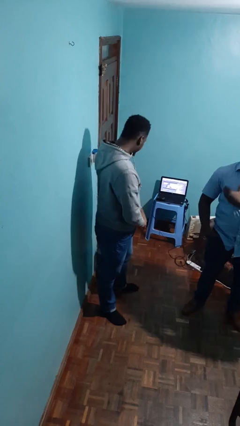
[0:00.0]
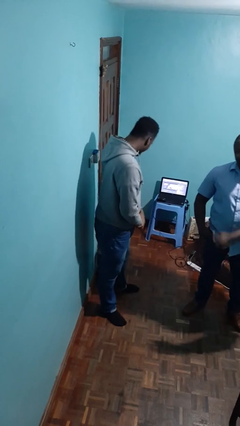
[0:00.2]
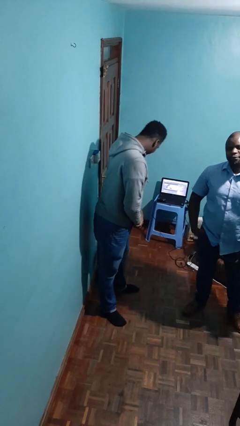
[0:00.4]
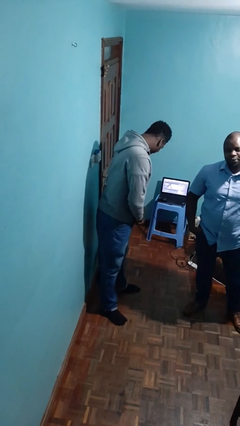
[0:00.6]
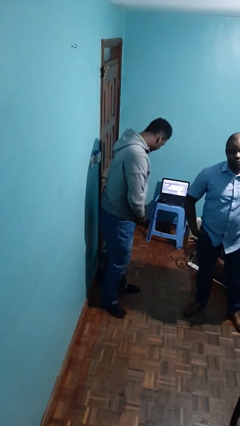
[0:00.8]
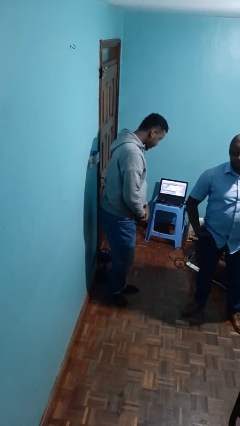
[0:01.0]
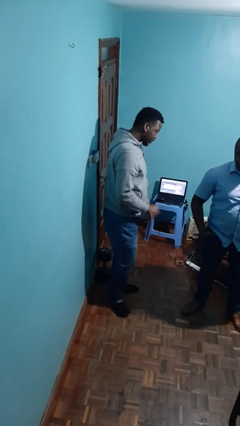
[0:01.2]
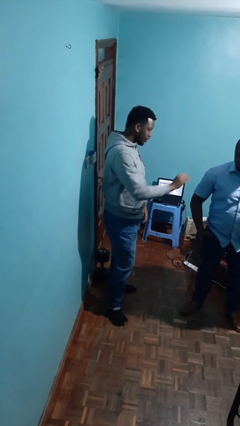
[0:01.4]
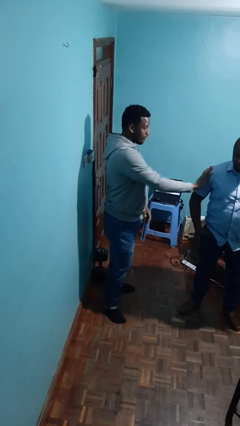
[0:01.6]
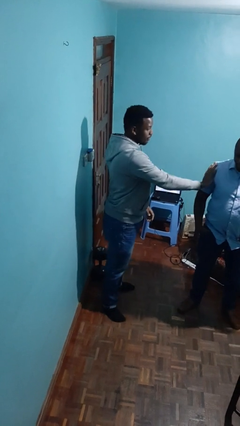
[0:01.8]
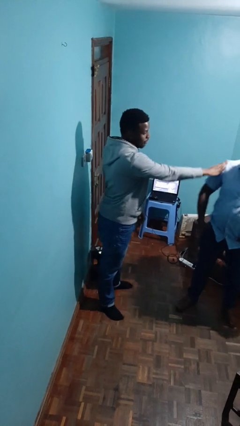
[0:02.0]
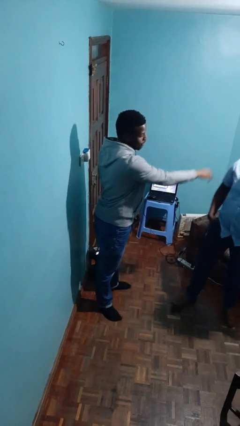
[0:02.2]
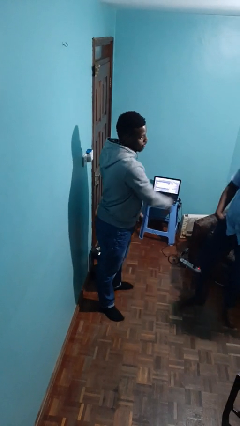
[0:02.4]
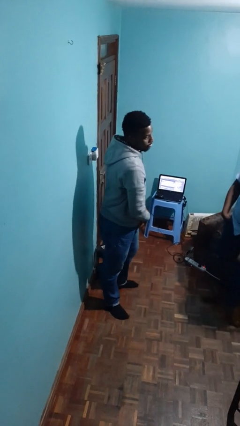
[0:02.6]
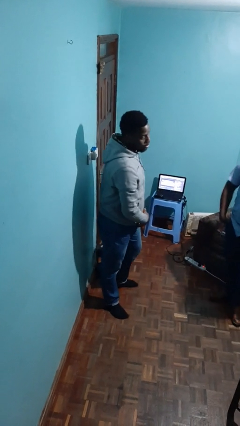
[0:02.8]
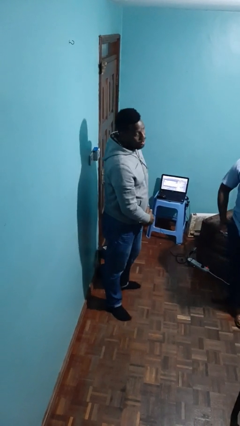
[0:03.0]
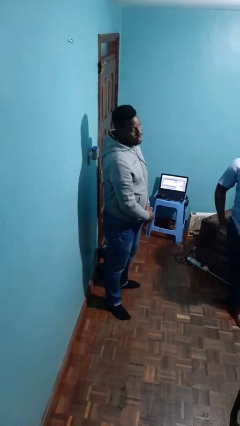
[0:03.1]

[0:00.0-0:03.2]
person shoves person

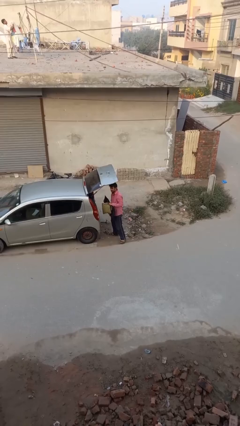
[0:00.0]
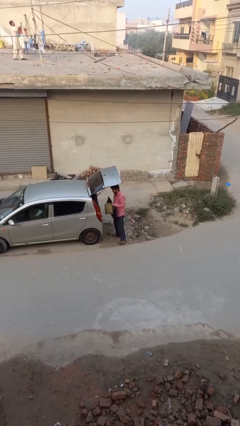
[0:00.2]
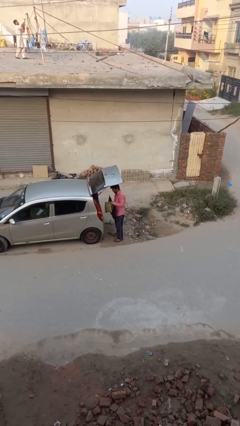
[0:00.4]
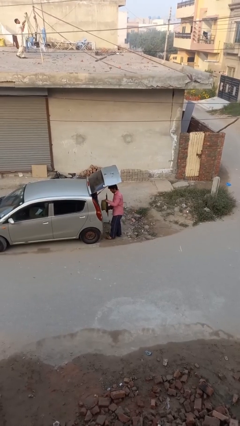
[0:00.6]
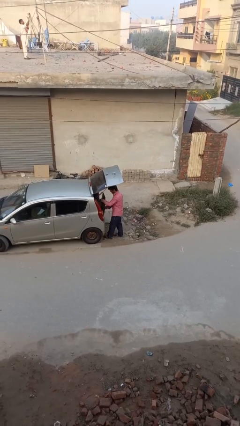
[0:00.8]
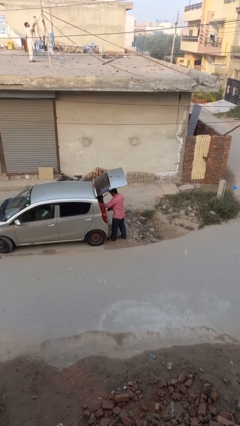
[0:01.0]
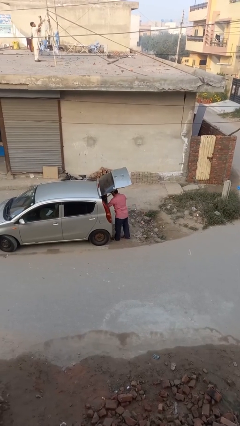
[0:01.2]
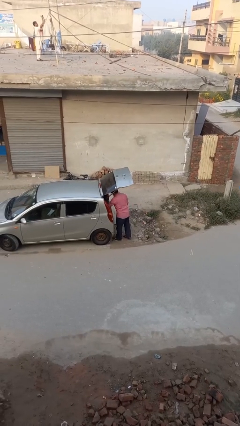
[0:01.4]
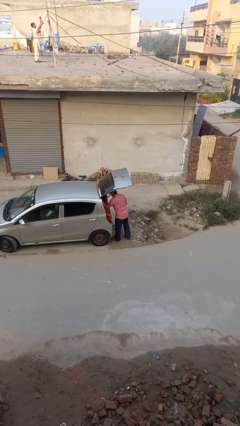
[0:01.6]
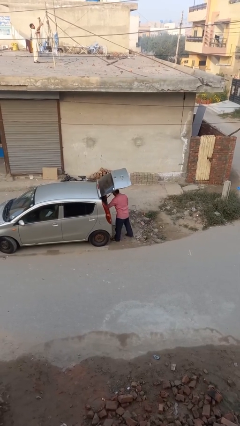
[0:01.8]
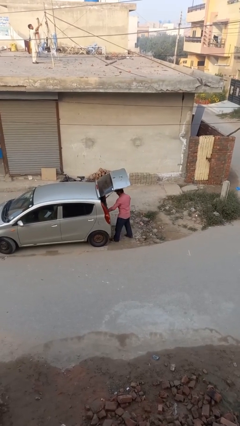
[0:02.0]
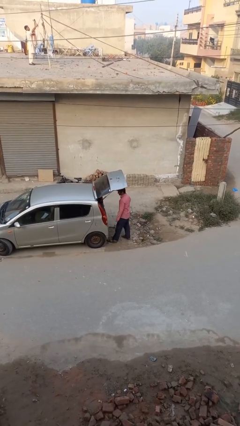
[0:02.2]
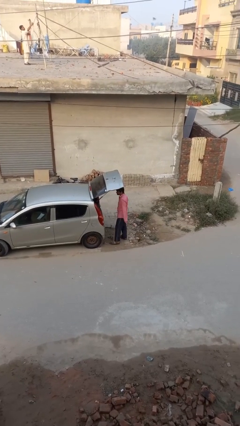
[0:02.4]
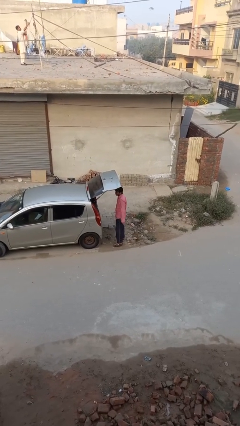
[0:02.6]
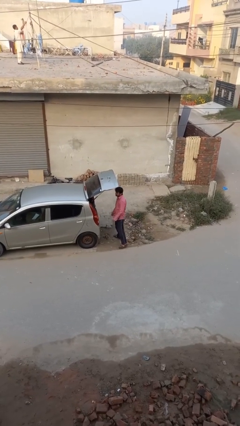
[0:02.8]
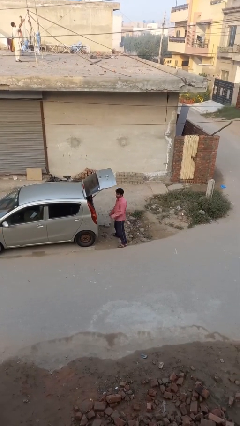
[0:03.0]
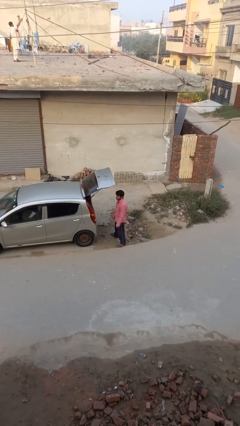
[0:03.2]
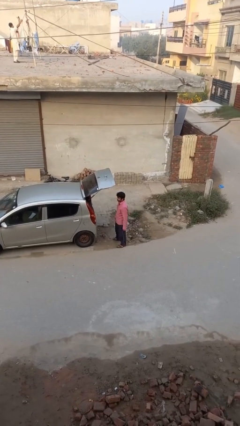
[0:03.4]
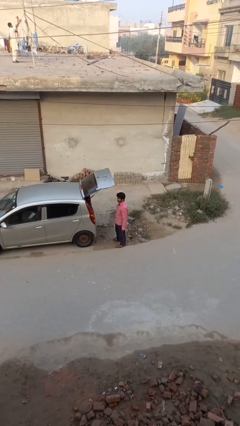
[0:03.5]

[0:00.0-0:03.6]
person loads car

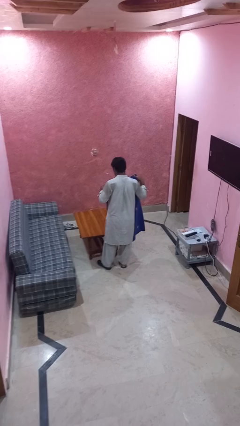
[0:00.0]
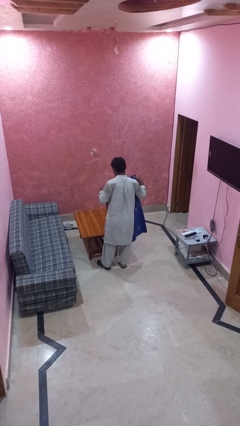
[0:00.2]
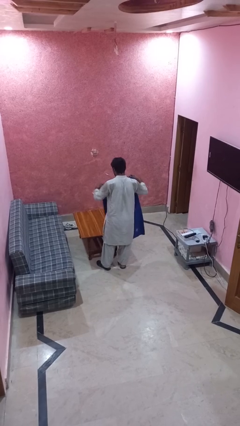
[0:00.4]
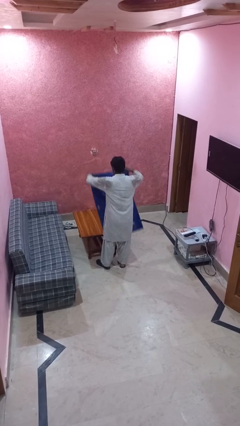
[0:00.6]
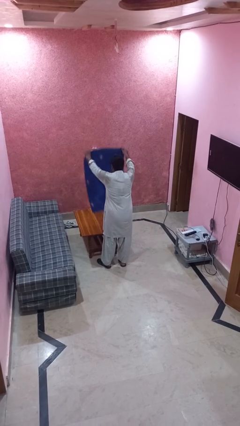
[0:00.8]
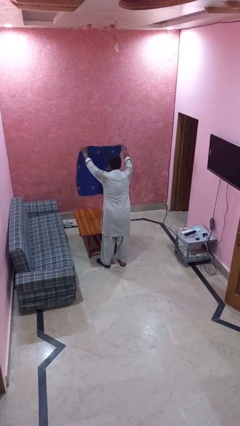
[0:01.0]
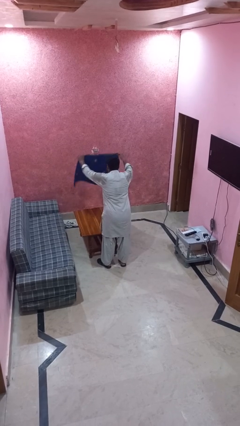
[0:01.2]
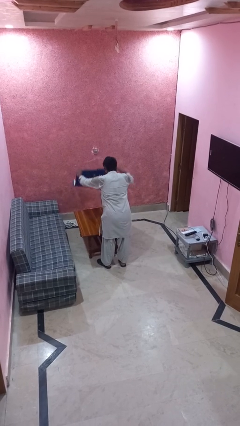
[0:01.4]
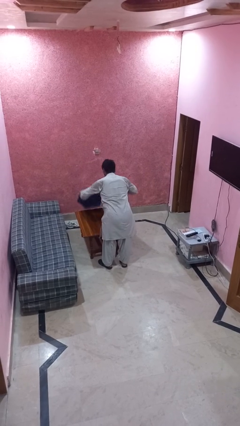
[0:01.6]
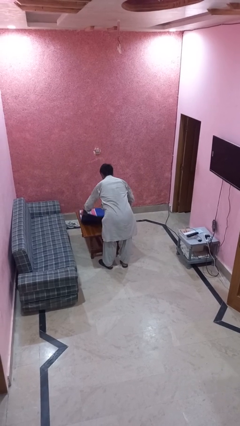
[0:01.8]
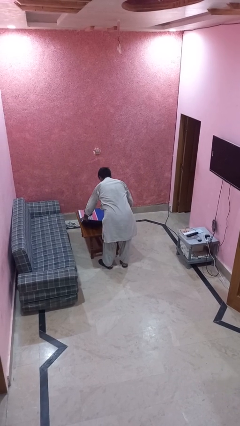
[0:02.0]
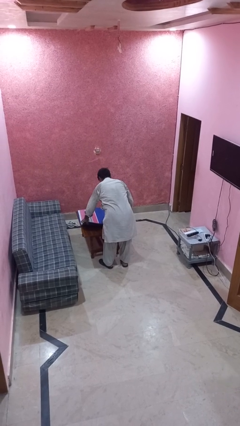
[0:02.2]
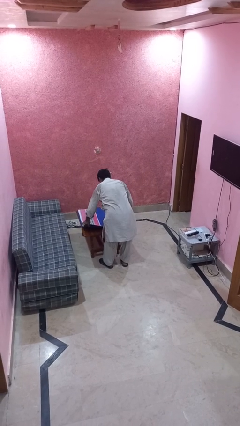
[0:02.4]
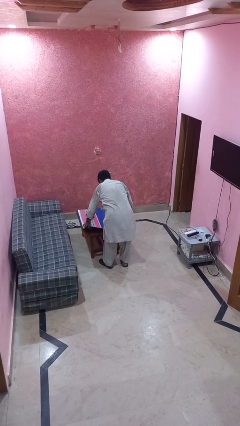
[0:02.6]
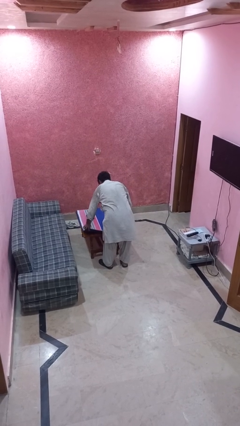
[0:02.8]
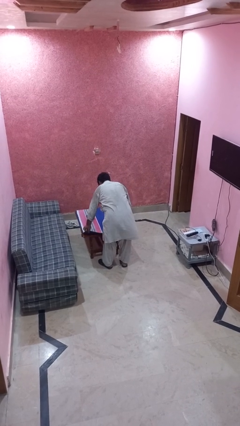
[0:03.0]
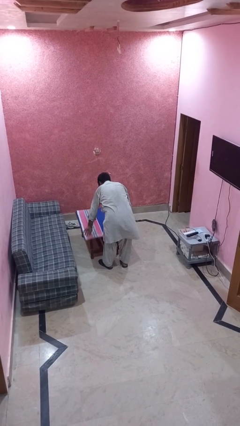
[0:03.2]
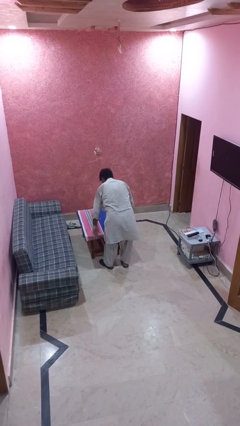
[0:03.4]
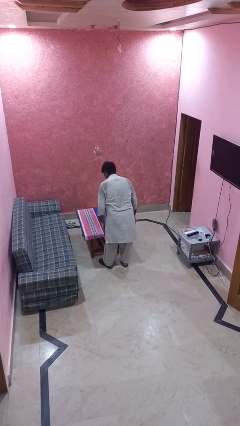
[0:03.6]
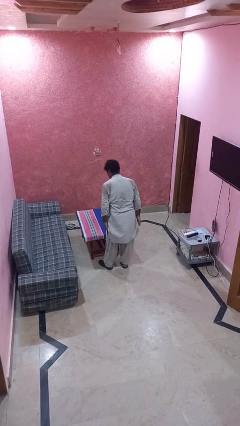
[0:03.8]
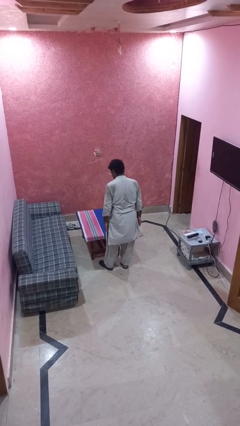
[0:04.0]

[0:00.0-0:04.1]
person spreads tablecloth

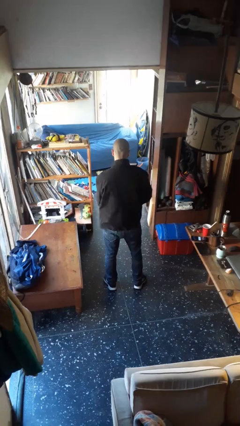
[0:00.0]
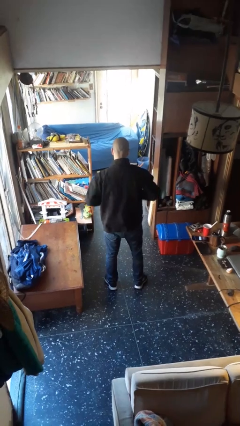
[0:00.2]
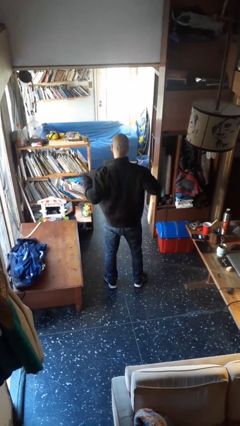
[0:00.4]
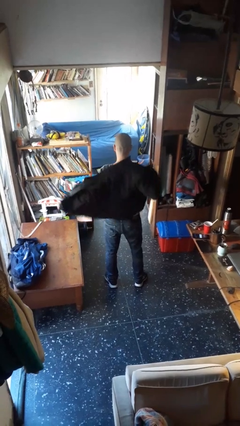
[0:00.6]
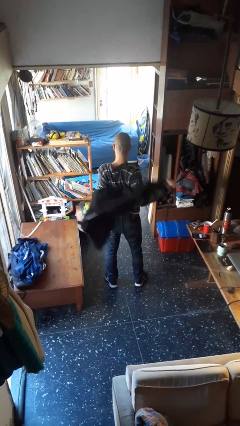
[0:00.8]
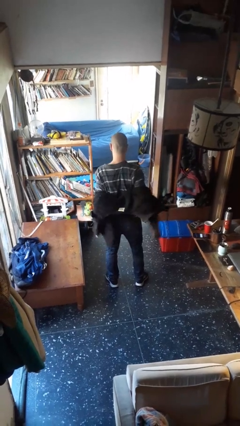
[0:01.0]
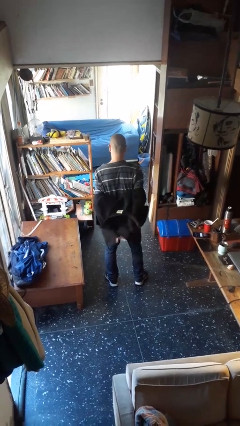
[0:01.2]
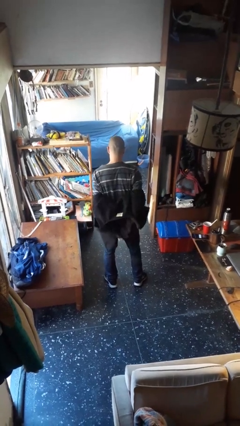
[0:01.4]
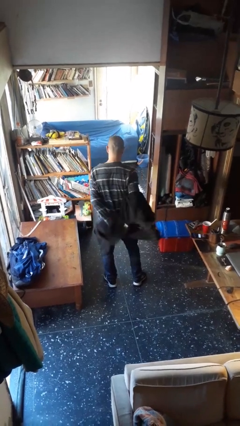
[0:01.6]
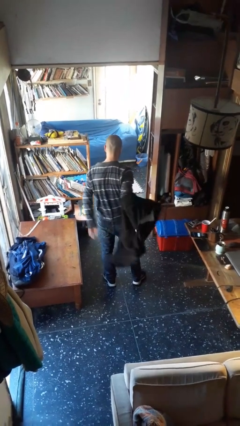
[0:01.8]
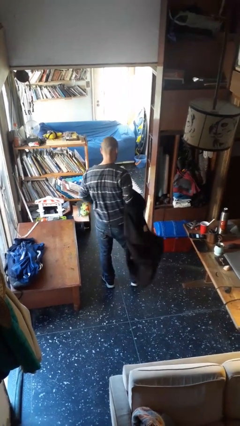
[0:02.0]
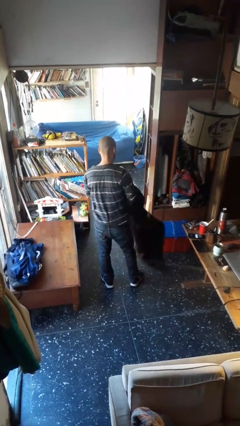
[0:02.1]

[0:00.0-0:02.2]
person takes off jacket

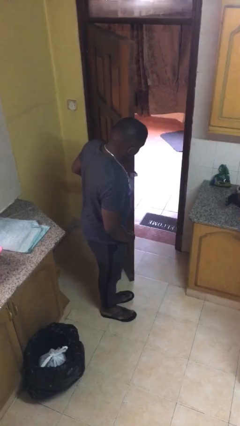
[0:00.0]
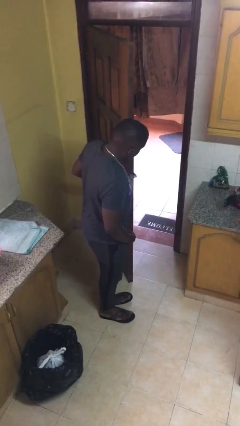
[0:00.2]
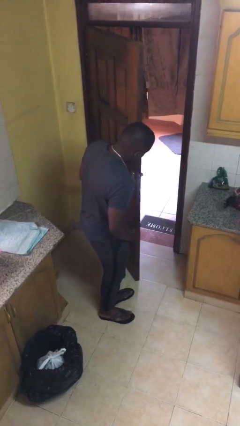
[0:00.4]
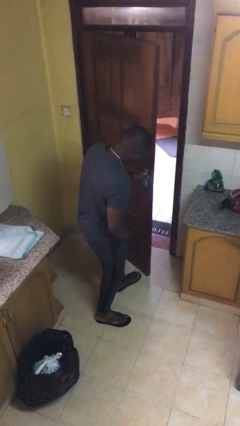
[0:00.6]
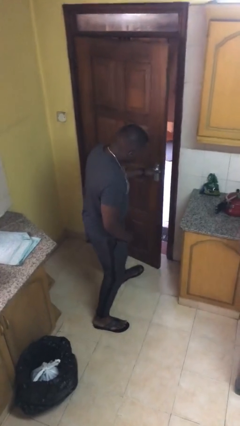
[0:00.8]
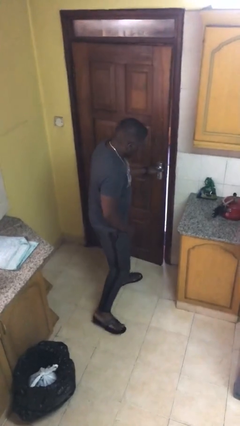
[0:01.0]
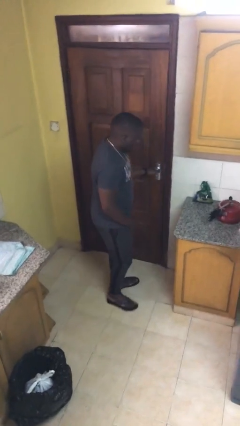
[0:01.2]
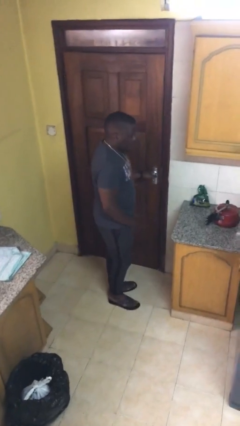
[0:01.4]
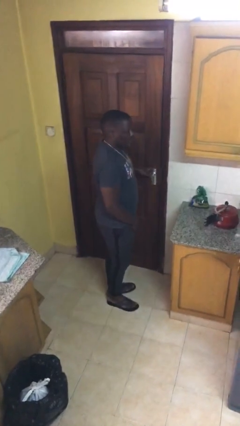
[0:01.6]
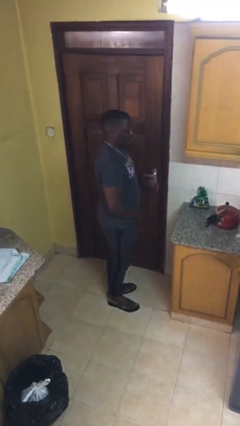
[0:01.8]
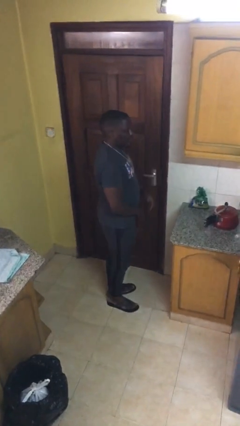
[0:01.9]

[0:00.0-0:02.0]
person closes facility door

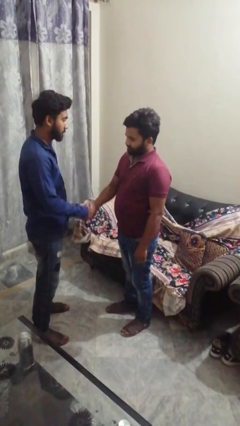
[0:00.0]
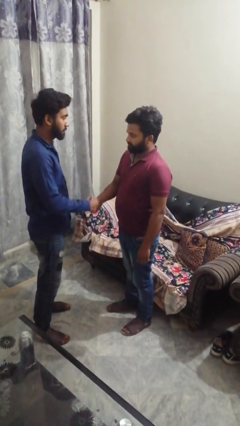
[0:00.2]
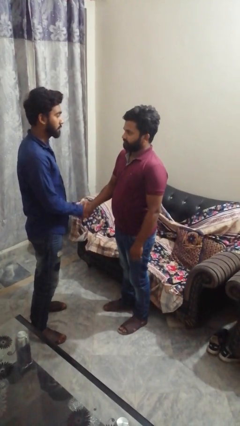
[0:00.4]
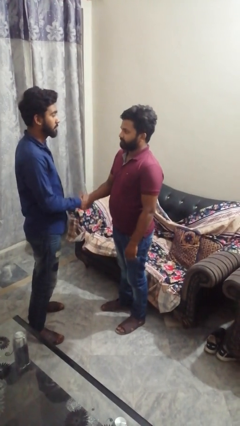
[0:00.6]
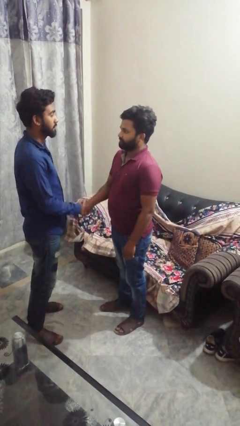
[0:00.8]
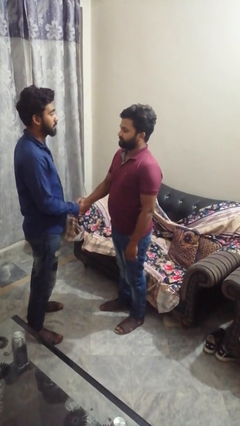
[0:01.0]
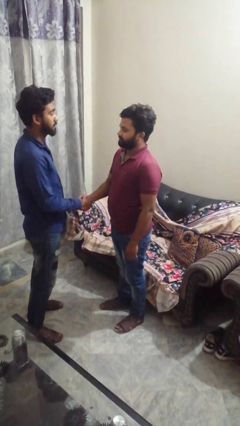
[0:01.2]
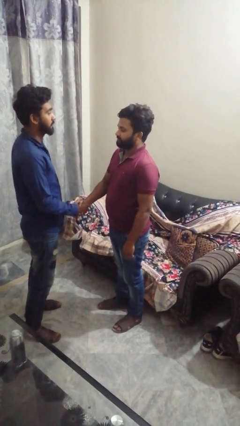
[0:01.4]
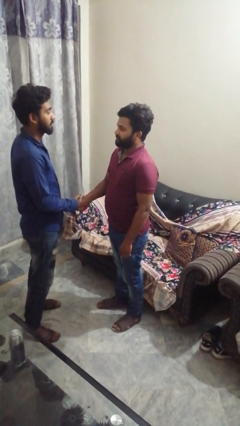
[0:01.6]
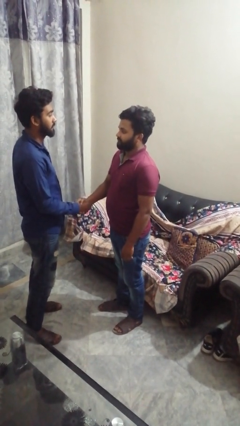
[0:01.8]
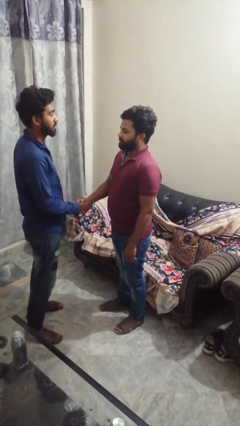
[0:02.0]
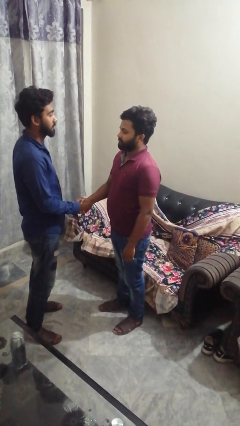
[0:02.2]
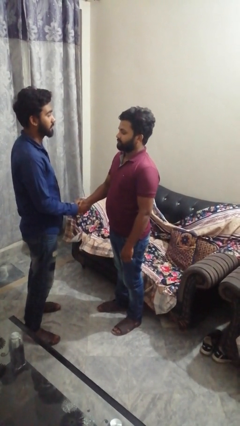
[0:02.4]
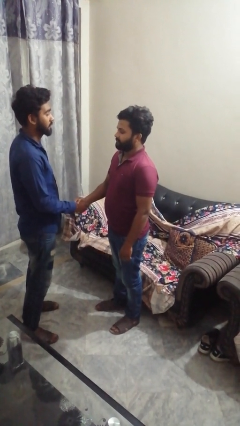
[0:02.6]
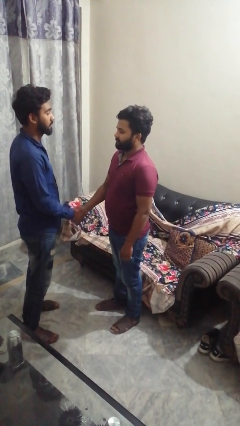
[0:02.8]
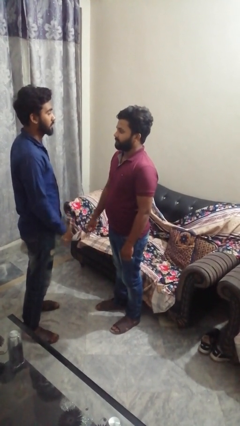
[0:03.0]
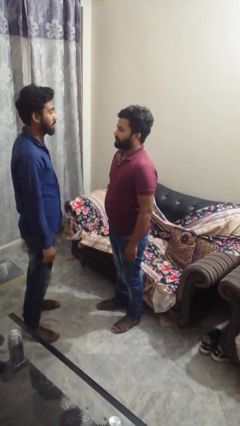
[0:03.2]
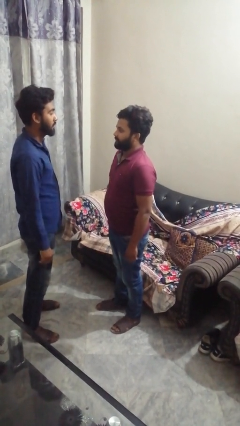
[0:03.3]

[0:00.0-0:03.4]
person highfives hand
